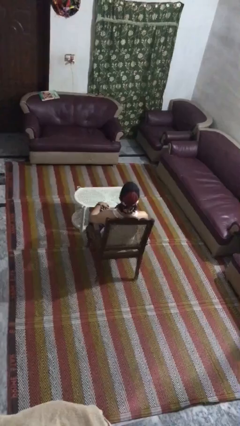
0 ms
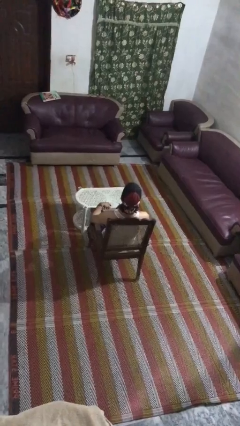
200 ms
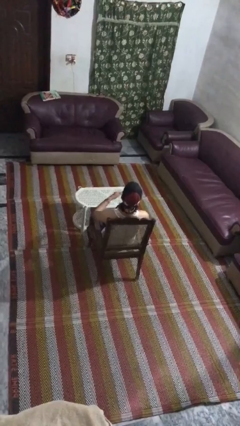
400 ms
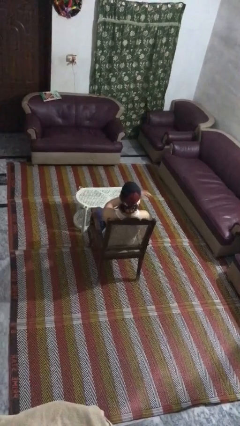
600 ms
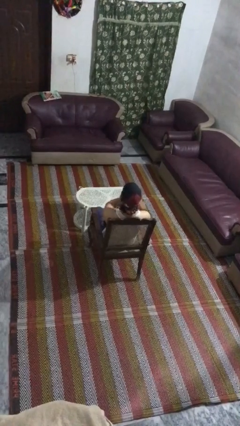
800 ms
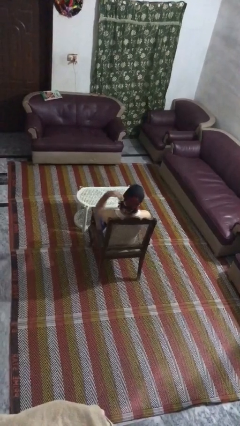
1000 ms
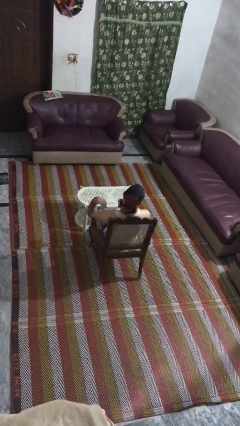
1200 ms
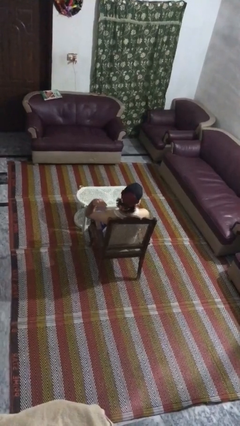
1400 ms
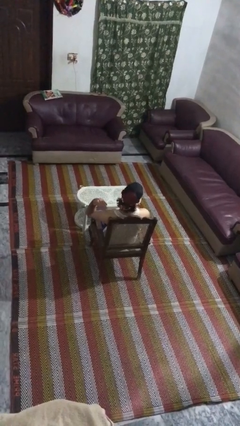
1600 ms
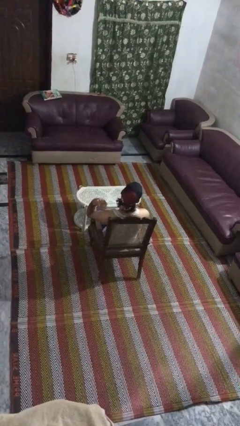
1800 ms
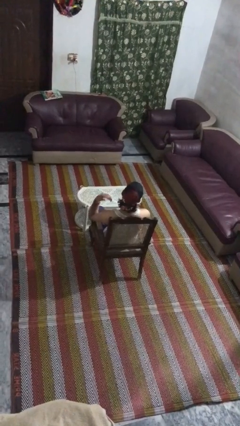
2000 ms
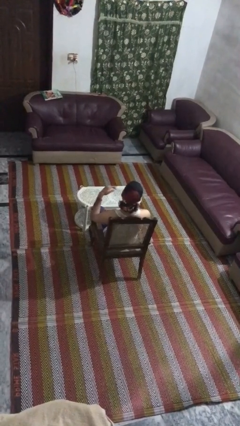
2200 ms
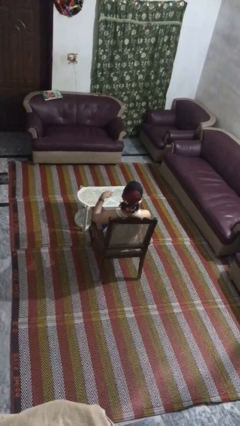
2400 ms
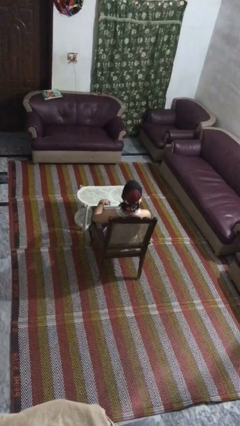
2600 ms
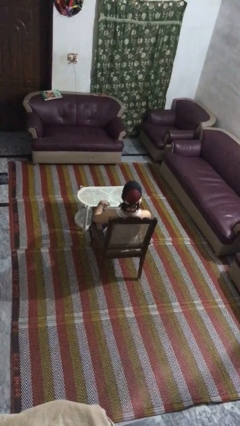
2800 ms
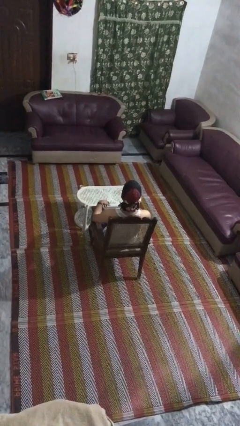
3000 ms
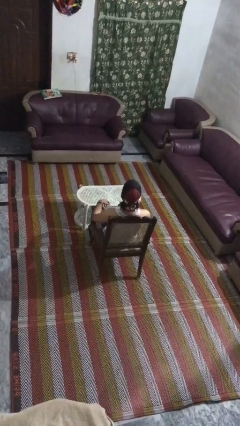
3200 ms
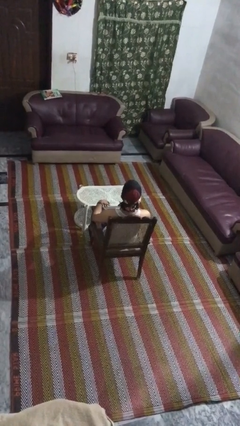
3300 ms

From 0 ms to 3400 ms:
person gestures cut

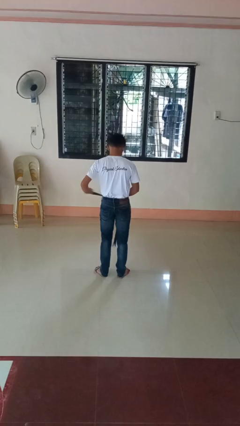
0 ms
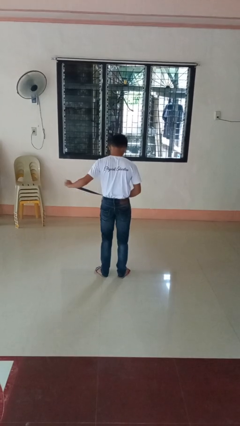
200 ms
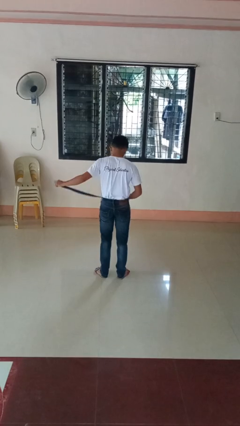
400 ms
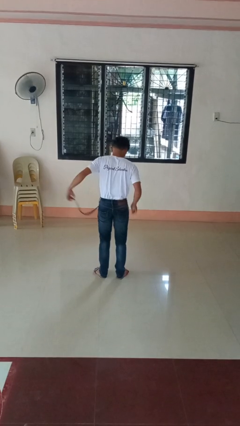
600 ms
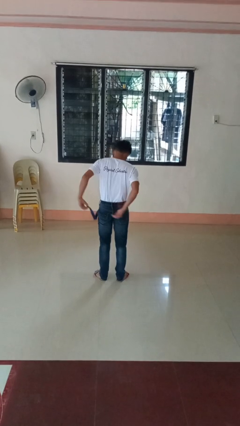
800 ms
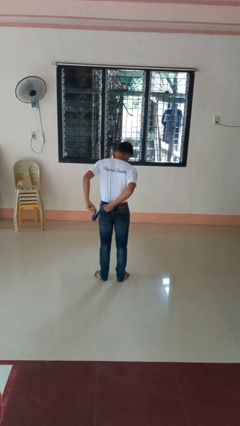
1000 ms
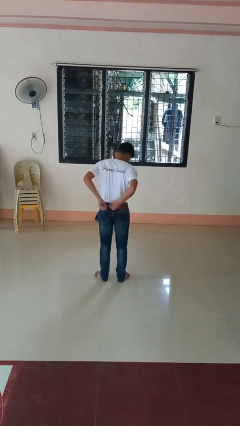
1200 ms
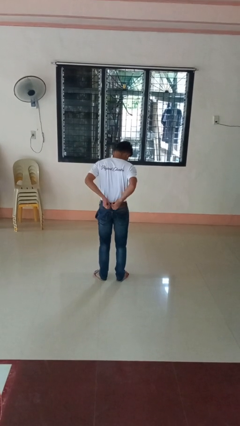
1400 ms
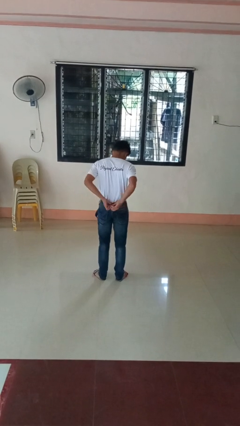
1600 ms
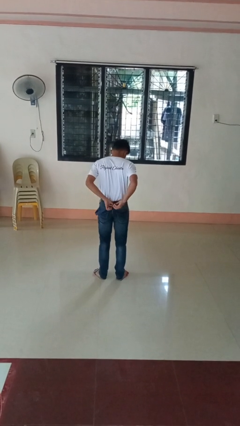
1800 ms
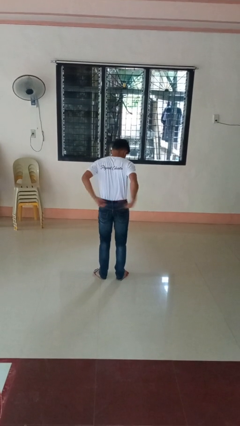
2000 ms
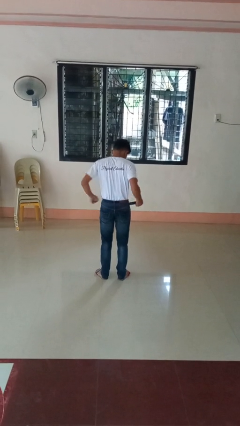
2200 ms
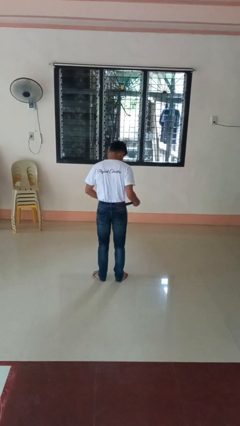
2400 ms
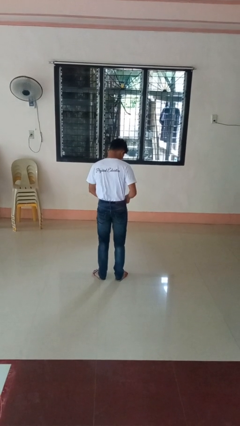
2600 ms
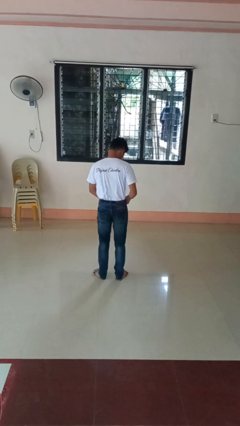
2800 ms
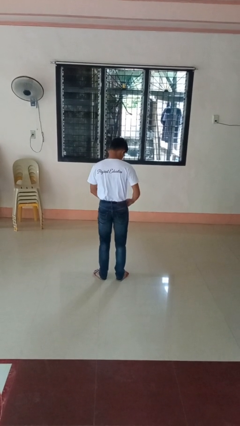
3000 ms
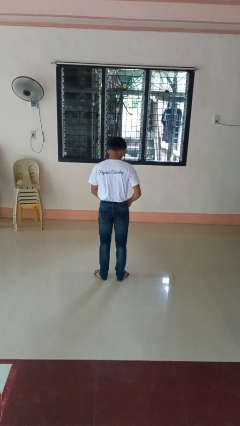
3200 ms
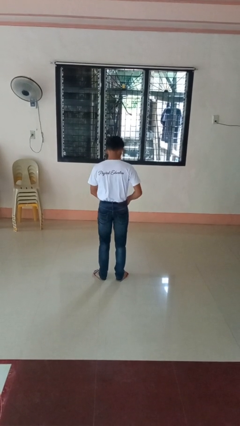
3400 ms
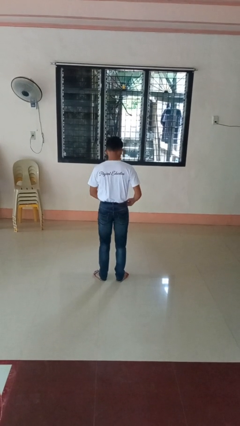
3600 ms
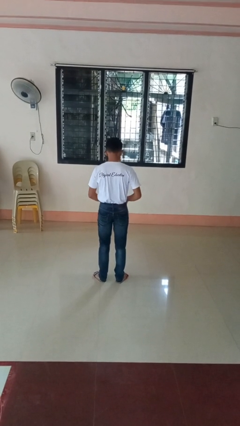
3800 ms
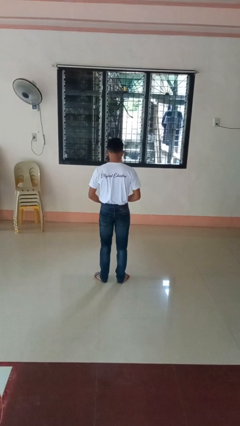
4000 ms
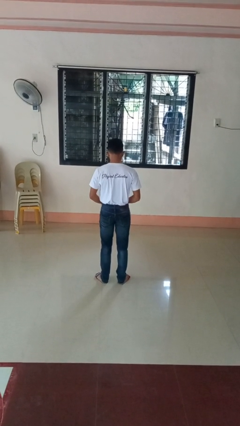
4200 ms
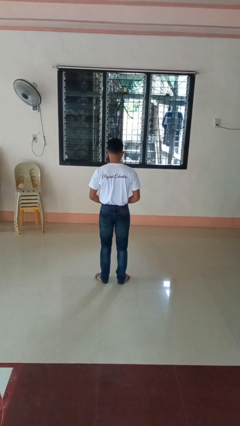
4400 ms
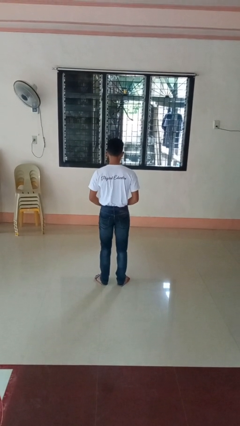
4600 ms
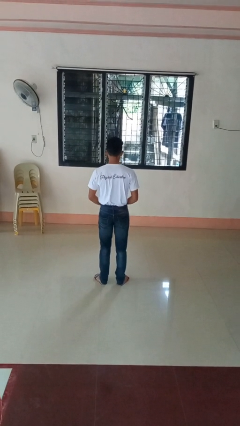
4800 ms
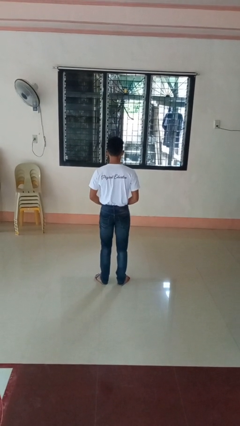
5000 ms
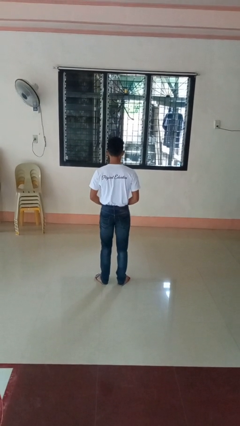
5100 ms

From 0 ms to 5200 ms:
person puts on belt

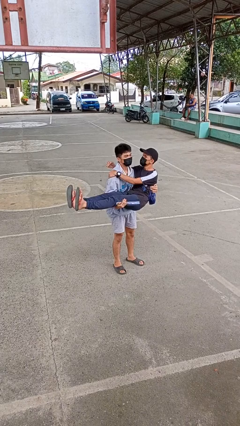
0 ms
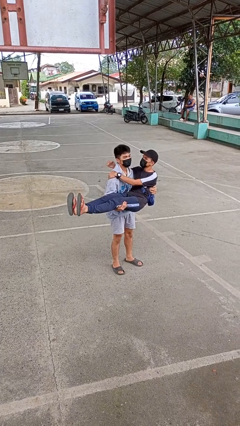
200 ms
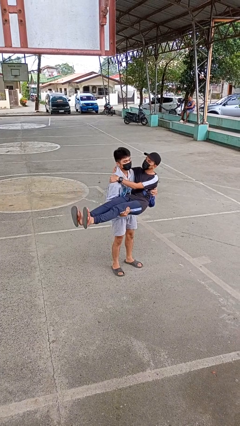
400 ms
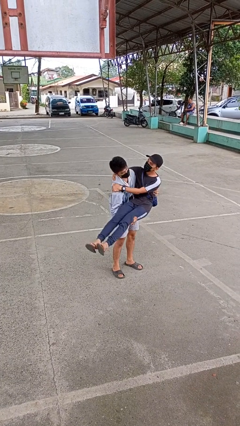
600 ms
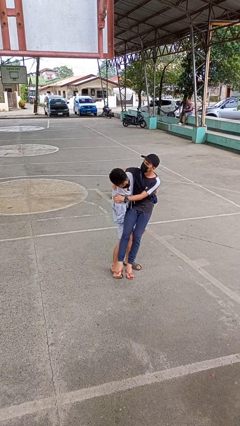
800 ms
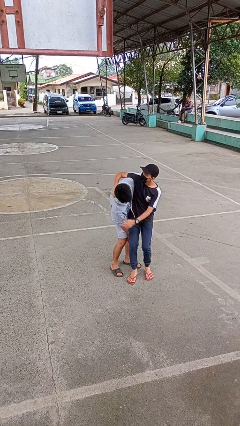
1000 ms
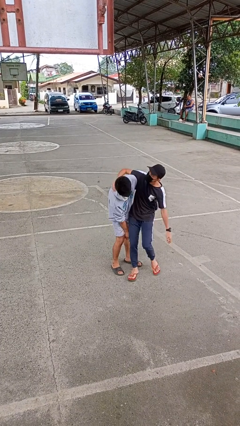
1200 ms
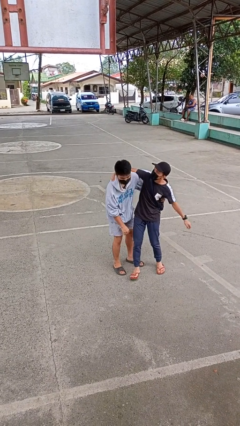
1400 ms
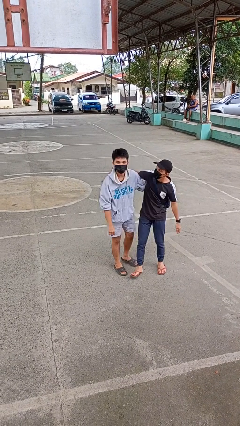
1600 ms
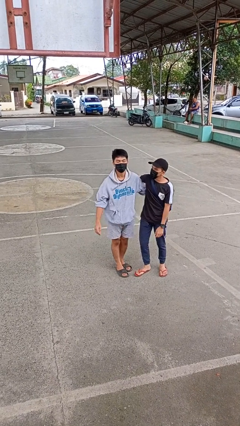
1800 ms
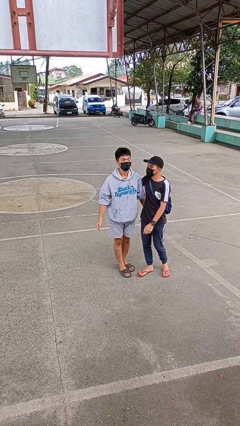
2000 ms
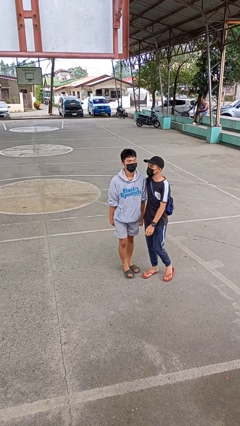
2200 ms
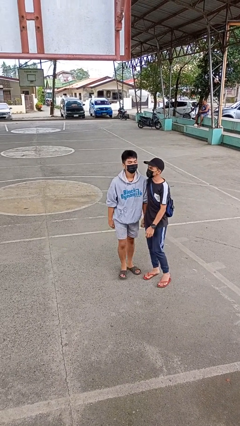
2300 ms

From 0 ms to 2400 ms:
person puts down person

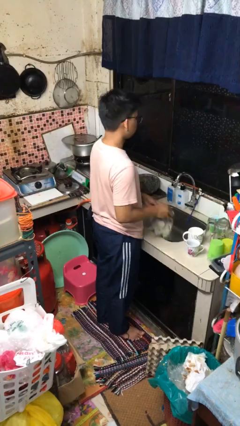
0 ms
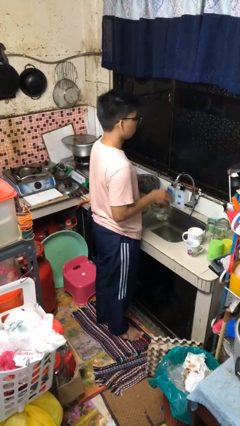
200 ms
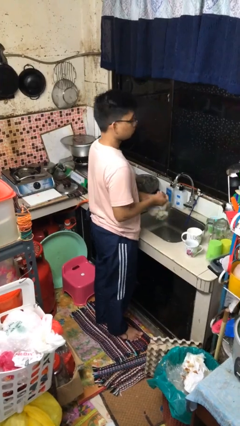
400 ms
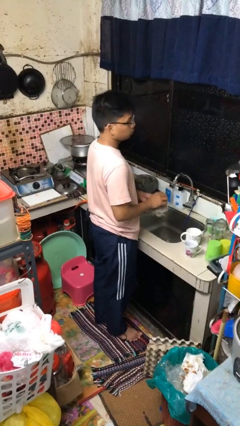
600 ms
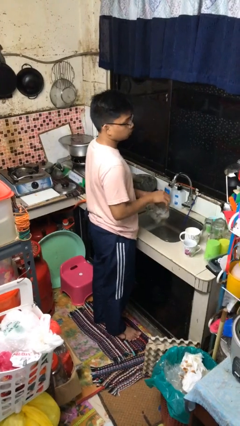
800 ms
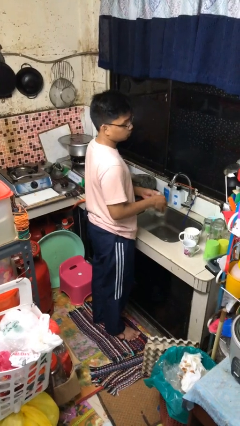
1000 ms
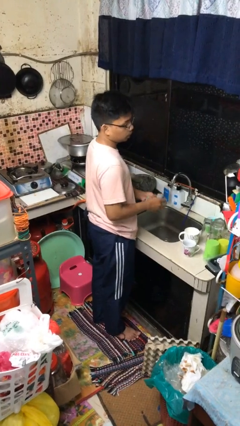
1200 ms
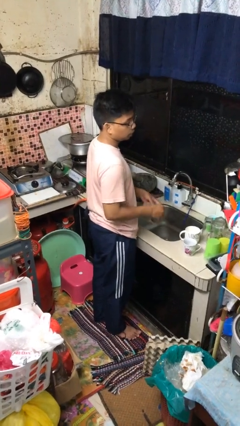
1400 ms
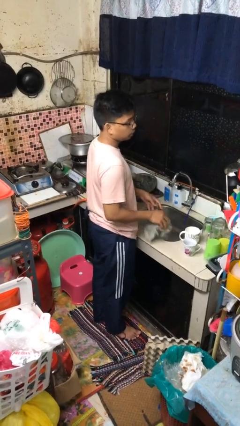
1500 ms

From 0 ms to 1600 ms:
person dries hands with towel

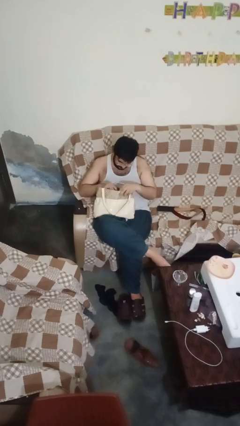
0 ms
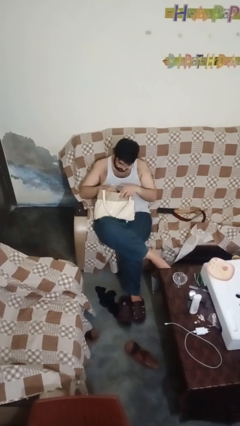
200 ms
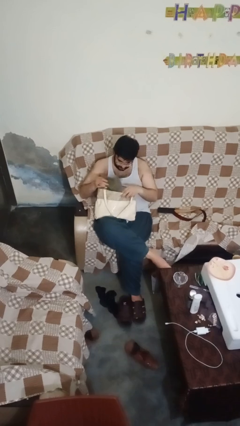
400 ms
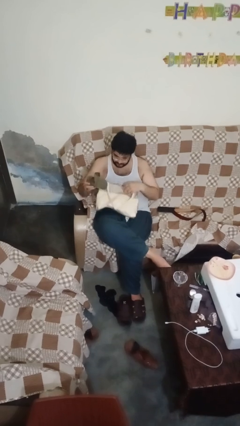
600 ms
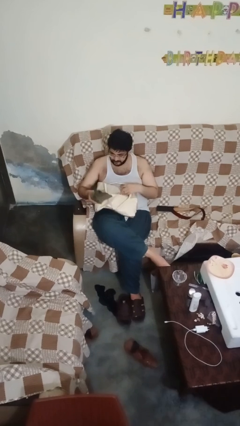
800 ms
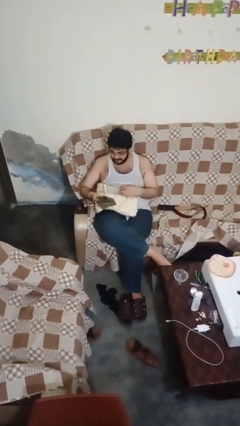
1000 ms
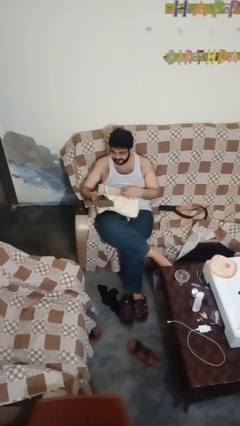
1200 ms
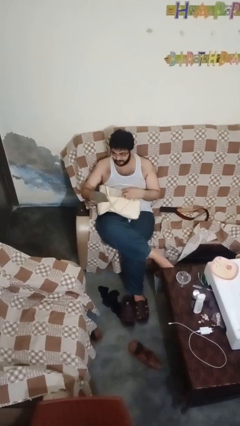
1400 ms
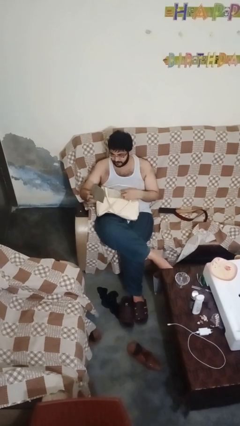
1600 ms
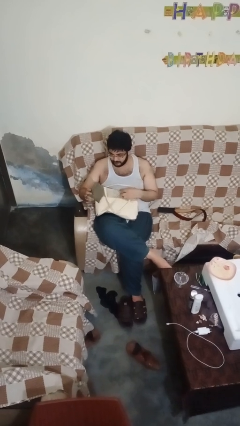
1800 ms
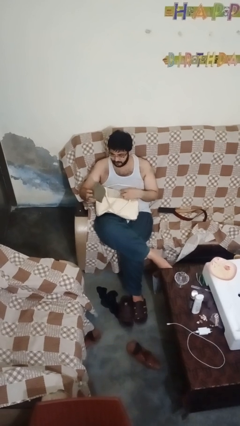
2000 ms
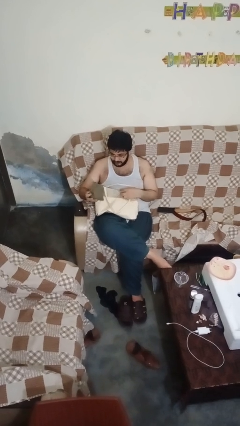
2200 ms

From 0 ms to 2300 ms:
person takes object from purse

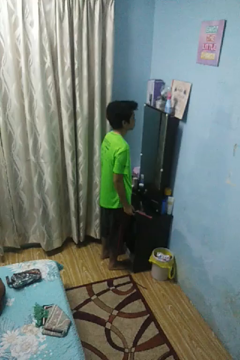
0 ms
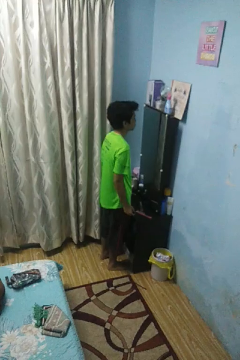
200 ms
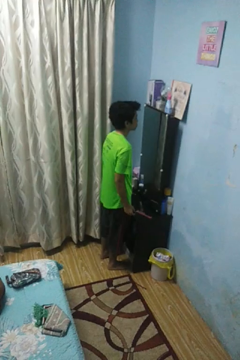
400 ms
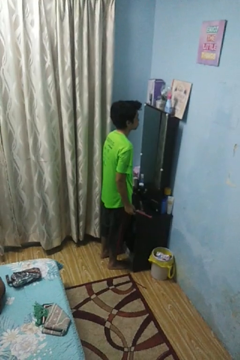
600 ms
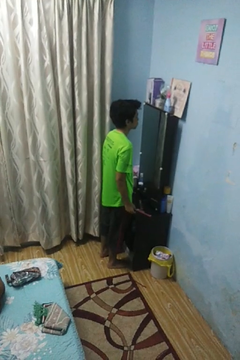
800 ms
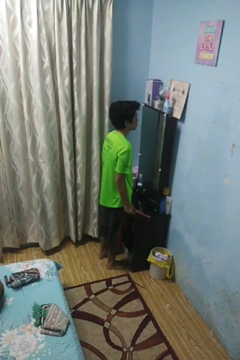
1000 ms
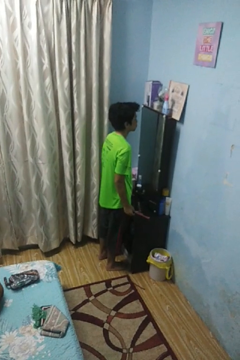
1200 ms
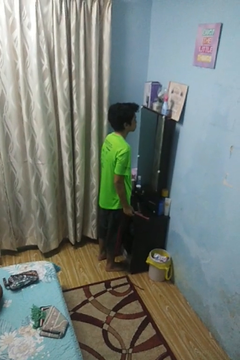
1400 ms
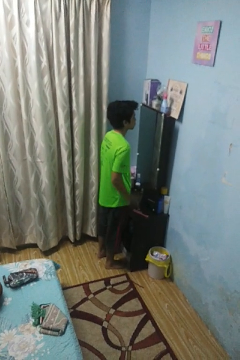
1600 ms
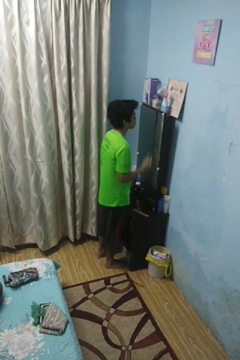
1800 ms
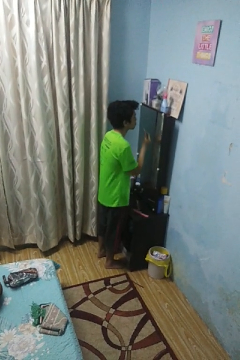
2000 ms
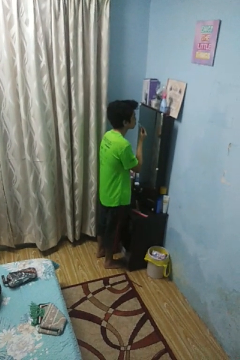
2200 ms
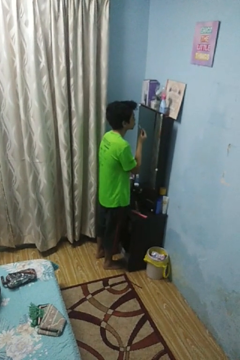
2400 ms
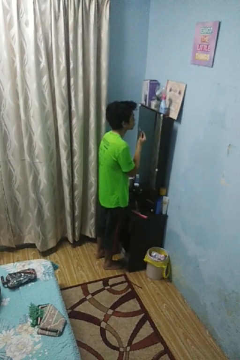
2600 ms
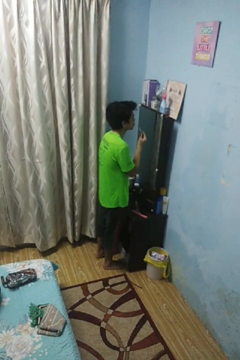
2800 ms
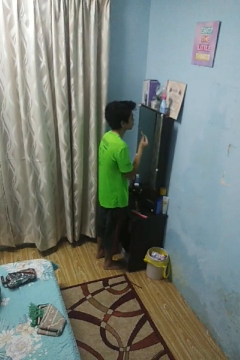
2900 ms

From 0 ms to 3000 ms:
person applies lip makeup

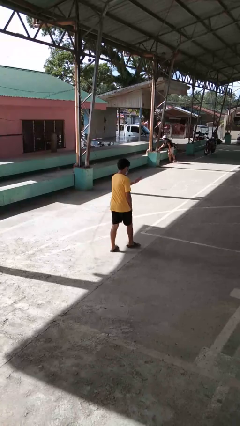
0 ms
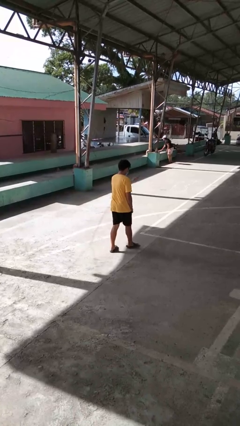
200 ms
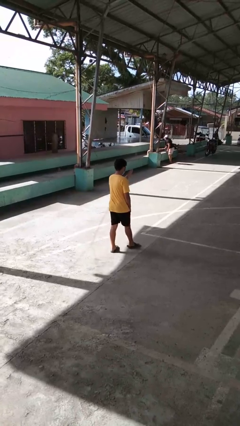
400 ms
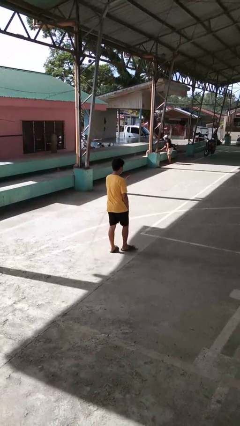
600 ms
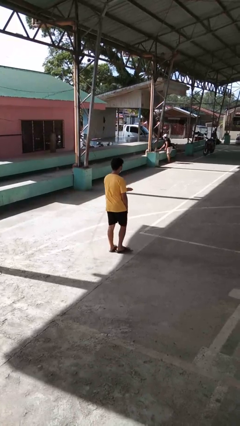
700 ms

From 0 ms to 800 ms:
person karate chop
